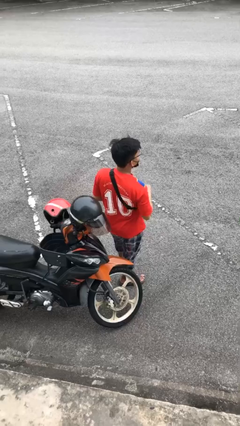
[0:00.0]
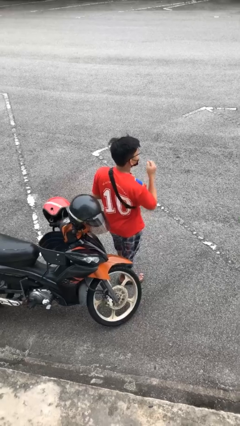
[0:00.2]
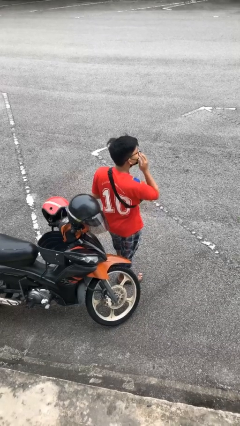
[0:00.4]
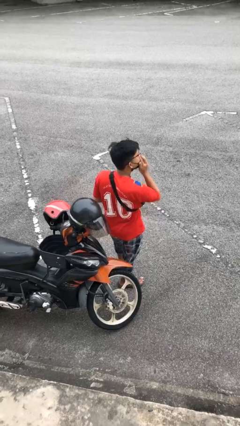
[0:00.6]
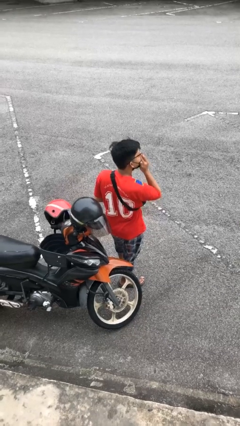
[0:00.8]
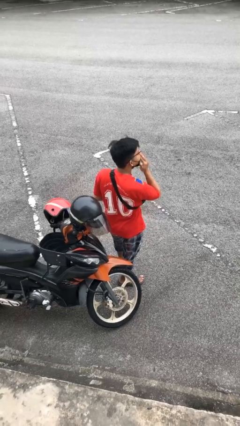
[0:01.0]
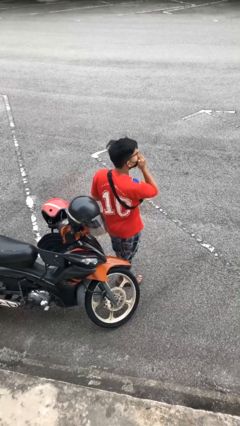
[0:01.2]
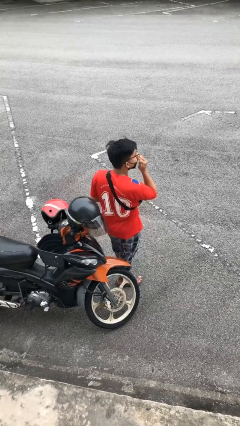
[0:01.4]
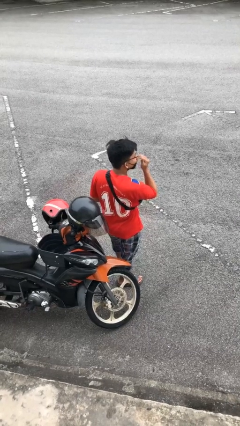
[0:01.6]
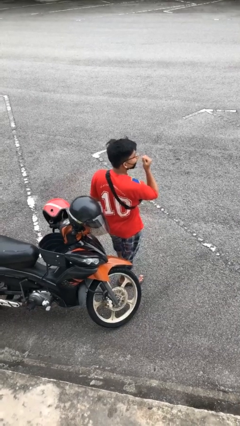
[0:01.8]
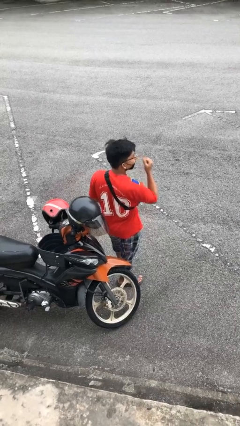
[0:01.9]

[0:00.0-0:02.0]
person scratches face

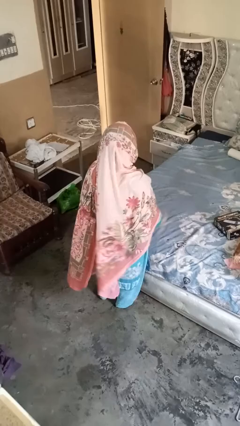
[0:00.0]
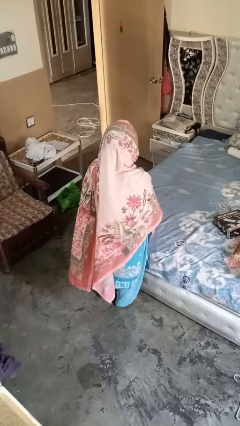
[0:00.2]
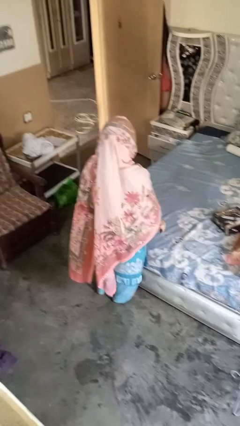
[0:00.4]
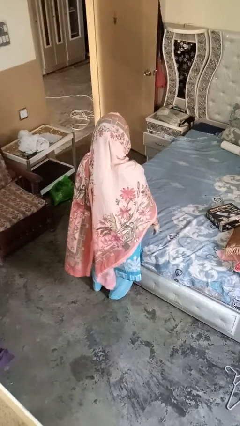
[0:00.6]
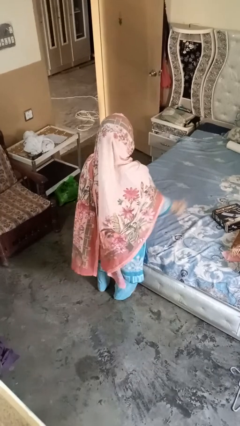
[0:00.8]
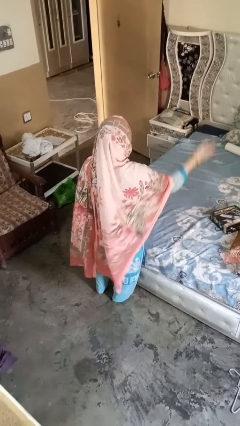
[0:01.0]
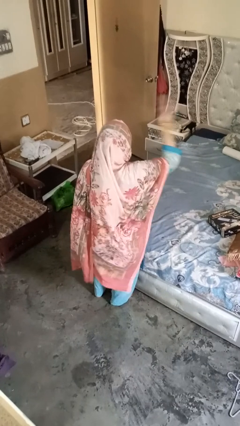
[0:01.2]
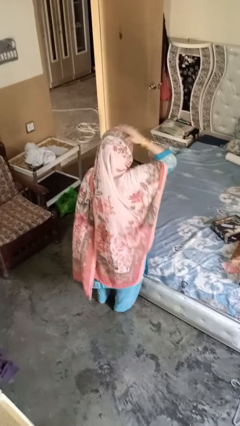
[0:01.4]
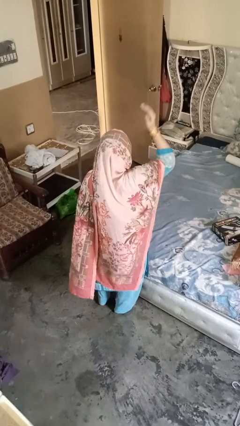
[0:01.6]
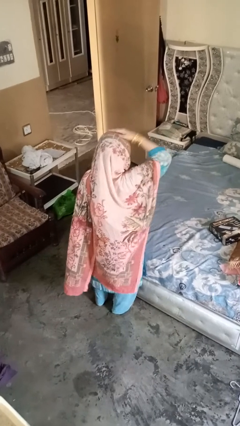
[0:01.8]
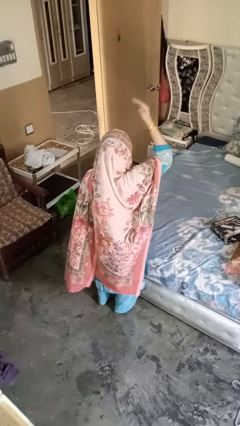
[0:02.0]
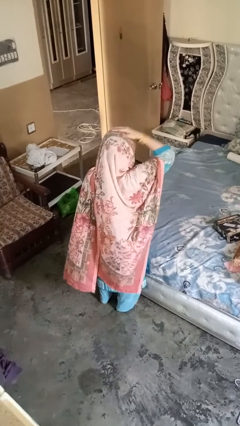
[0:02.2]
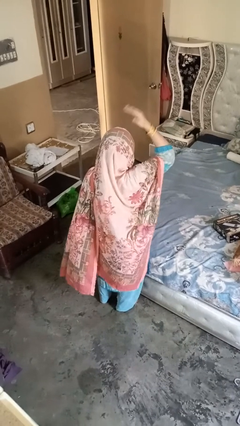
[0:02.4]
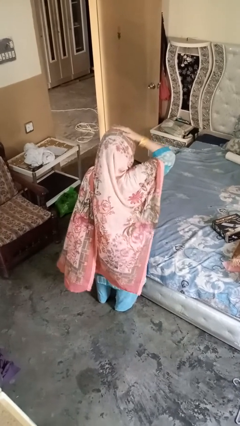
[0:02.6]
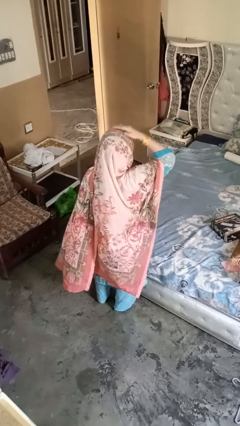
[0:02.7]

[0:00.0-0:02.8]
person pats head

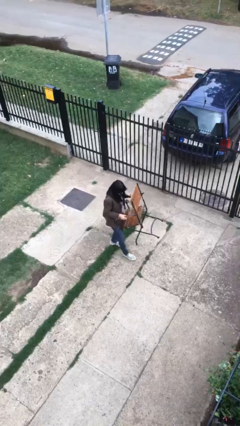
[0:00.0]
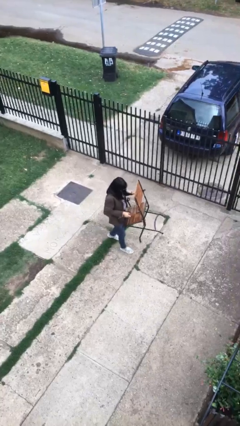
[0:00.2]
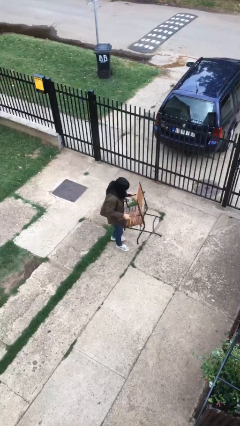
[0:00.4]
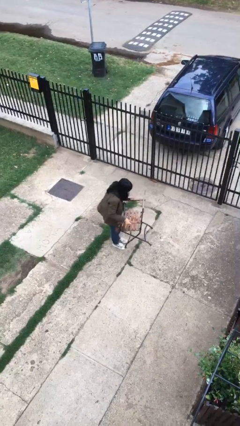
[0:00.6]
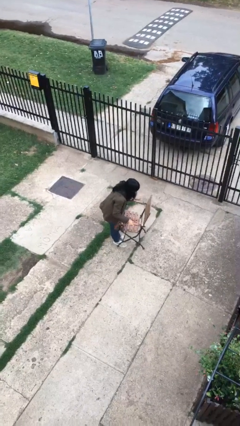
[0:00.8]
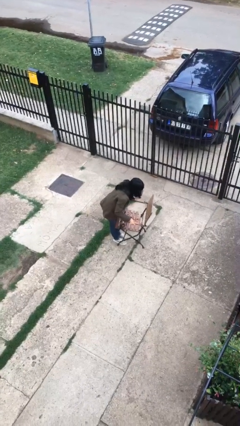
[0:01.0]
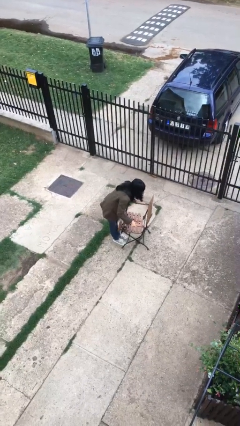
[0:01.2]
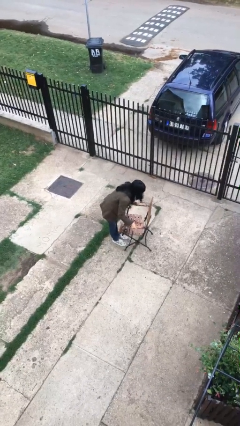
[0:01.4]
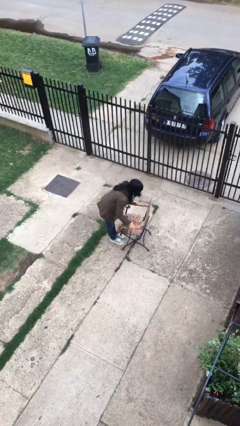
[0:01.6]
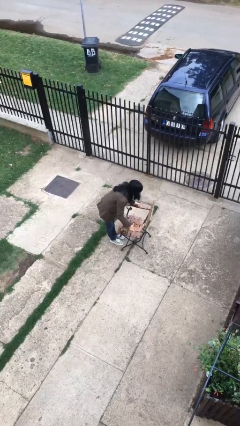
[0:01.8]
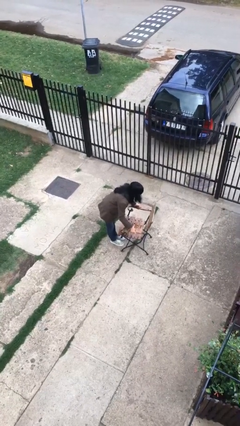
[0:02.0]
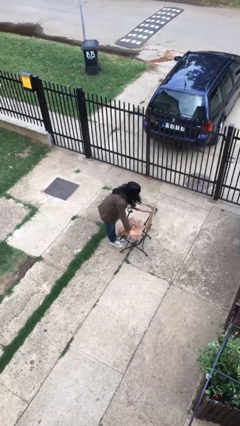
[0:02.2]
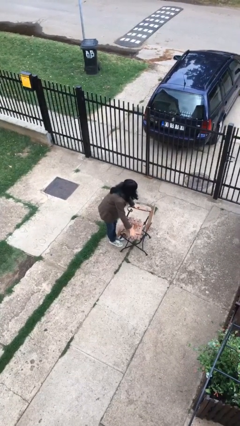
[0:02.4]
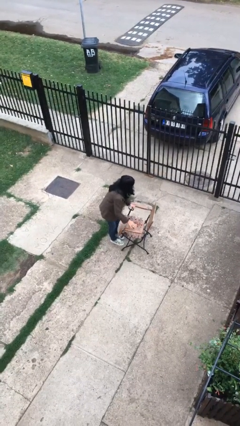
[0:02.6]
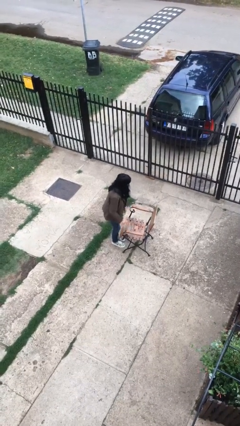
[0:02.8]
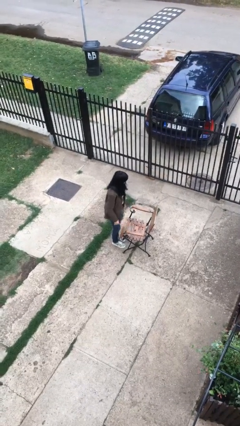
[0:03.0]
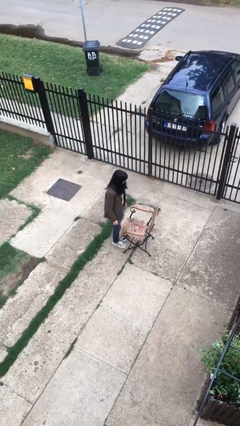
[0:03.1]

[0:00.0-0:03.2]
person puts down object on floor

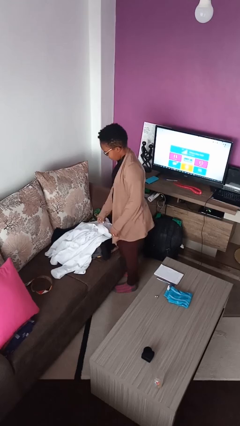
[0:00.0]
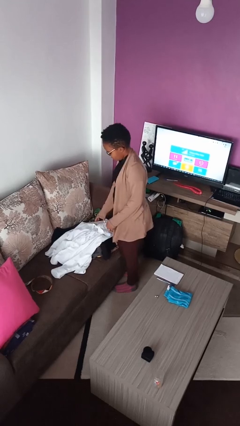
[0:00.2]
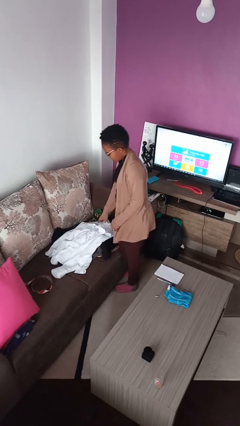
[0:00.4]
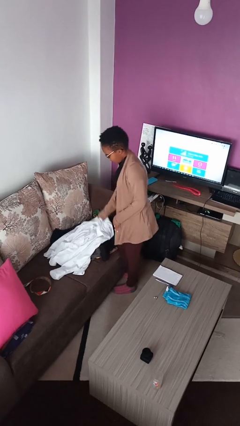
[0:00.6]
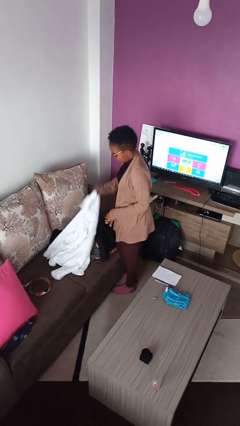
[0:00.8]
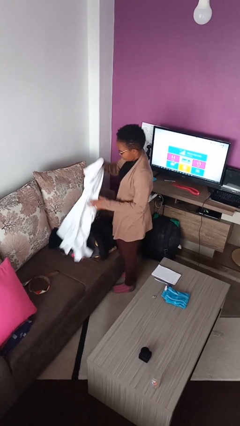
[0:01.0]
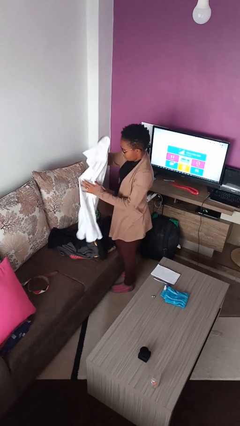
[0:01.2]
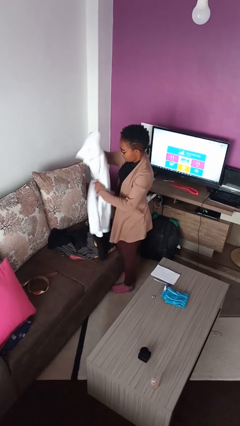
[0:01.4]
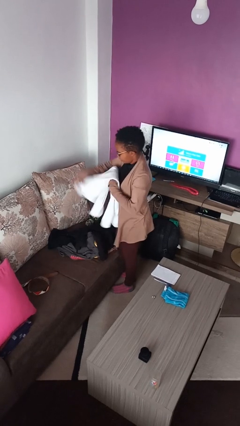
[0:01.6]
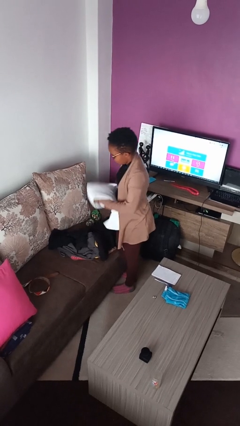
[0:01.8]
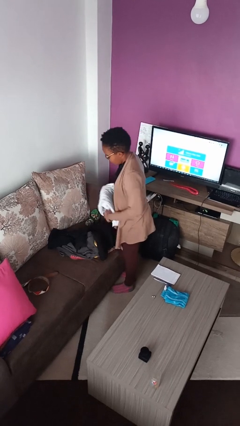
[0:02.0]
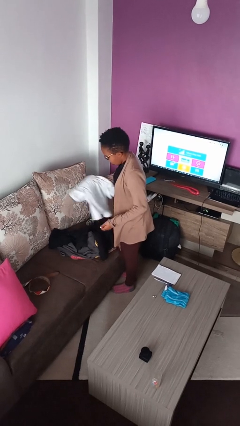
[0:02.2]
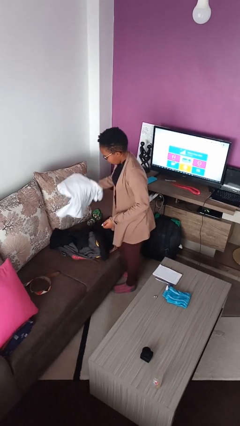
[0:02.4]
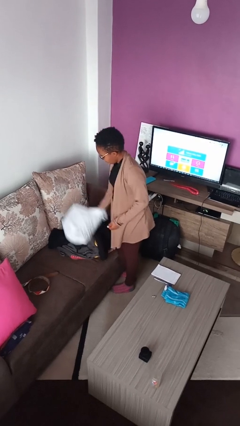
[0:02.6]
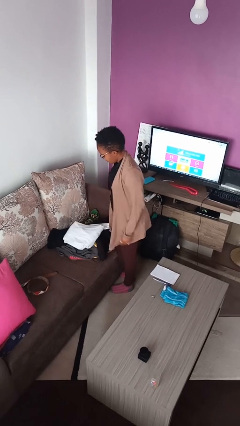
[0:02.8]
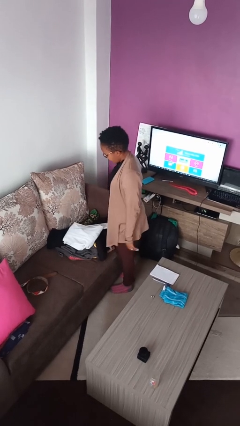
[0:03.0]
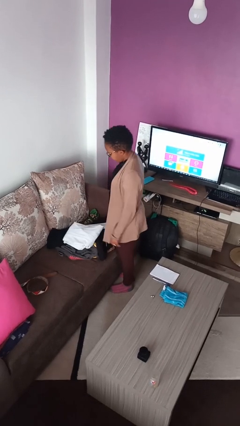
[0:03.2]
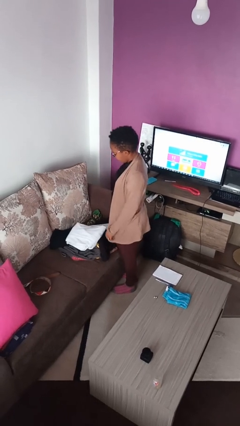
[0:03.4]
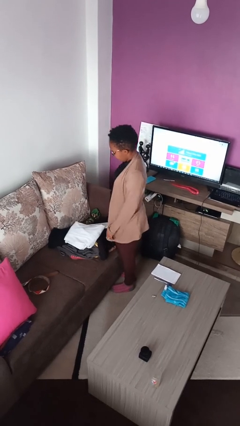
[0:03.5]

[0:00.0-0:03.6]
person folds shirt

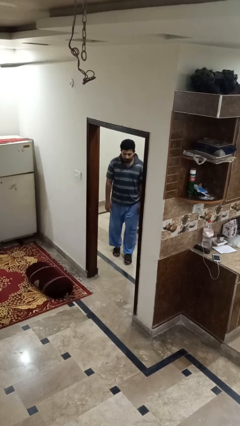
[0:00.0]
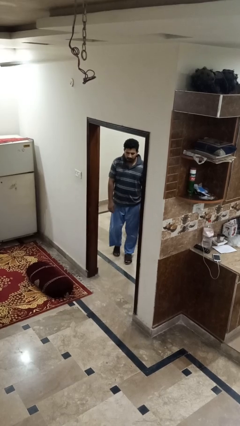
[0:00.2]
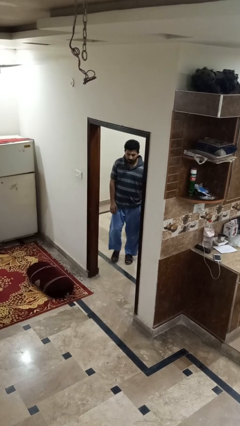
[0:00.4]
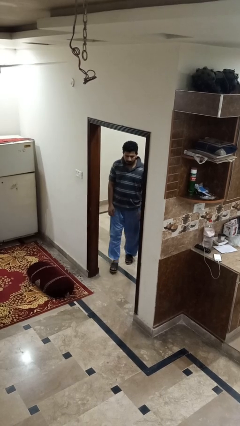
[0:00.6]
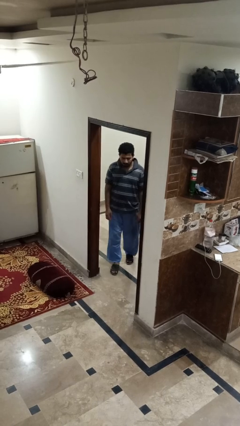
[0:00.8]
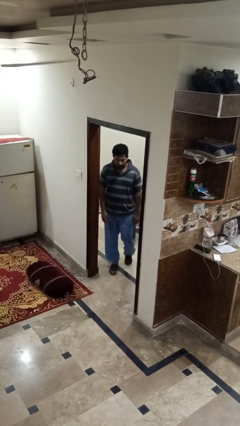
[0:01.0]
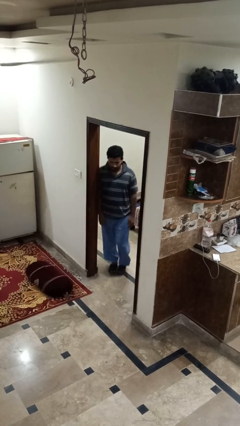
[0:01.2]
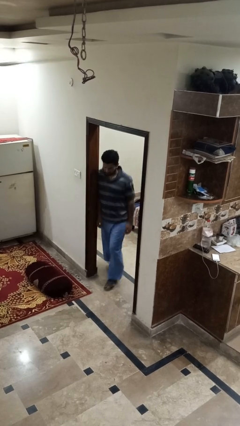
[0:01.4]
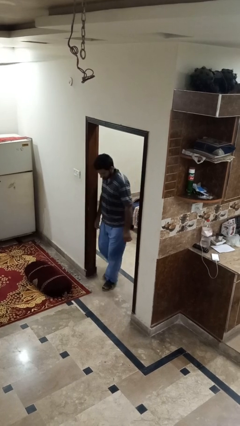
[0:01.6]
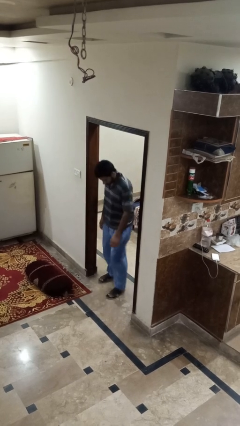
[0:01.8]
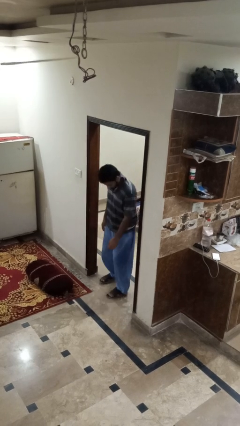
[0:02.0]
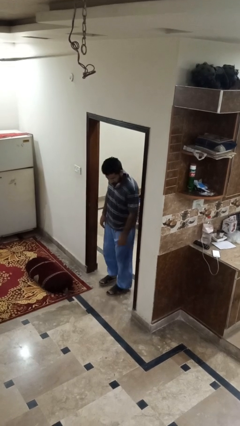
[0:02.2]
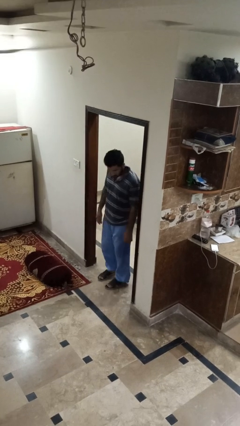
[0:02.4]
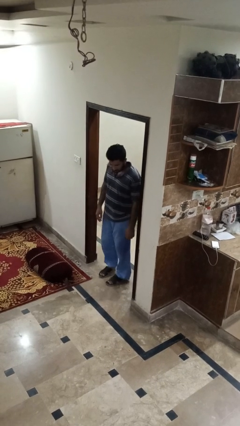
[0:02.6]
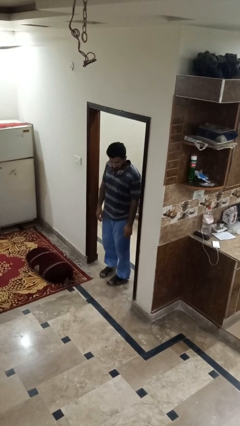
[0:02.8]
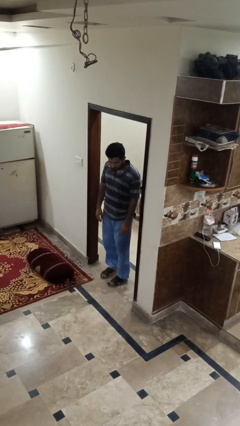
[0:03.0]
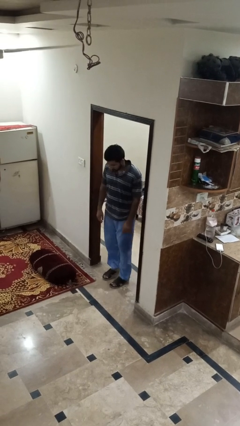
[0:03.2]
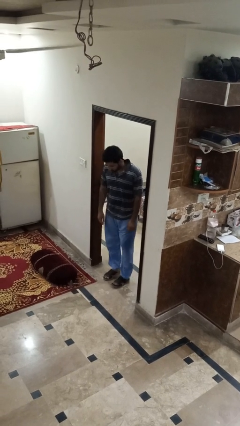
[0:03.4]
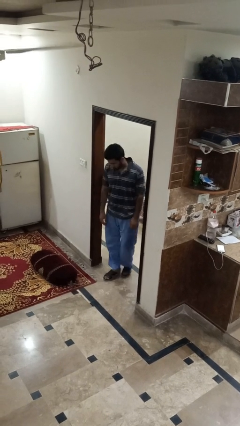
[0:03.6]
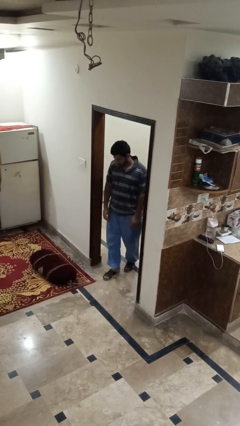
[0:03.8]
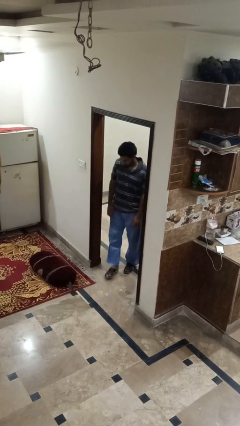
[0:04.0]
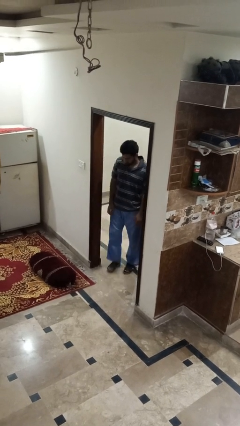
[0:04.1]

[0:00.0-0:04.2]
person bumps into wall

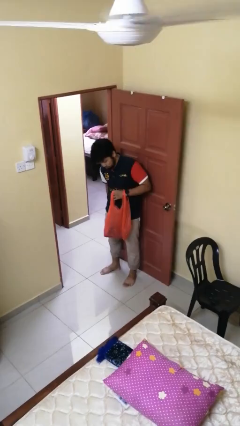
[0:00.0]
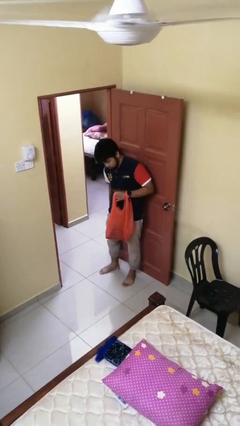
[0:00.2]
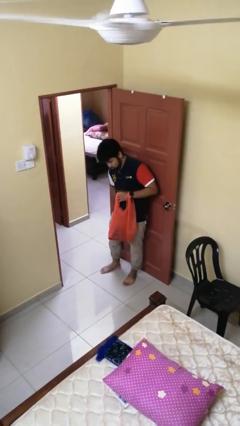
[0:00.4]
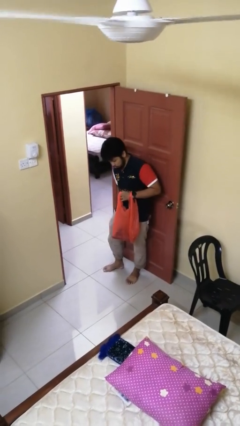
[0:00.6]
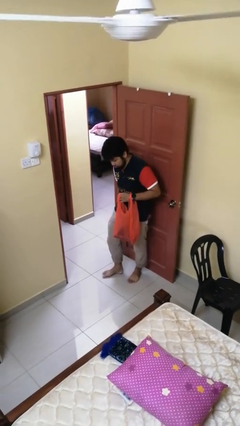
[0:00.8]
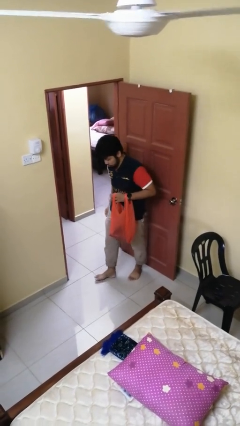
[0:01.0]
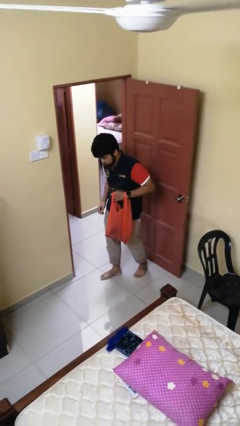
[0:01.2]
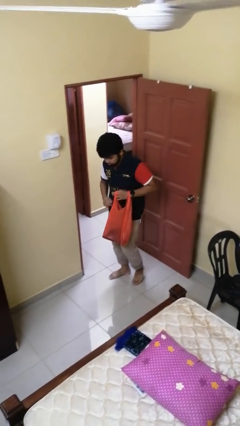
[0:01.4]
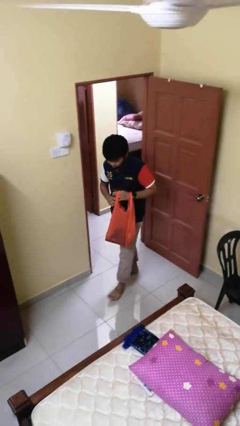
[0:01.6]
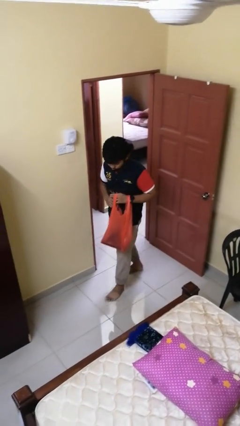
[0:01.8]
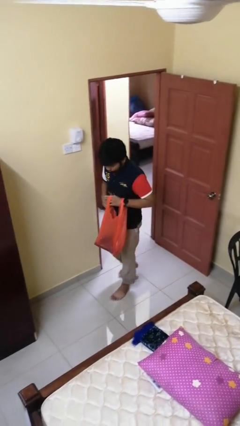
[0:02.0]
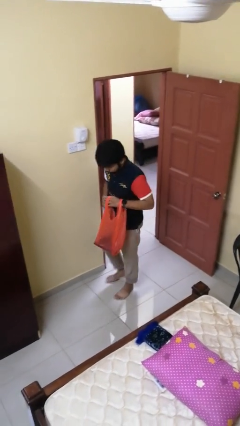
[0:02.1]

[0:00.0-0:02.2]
person carries groceries
